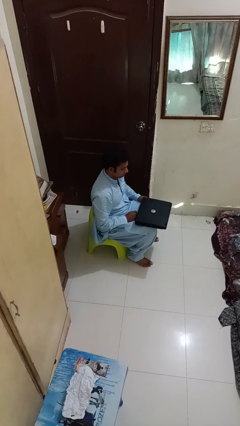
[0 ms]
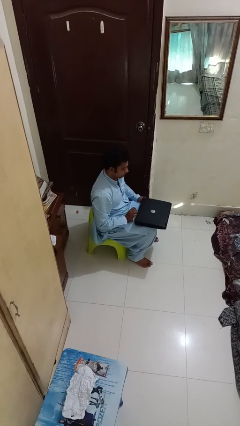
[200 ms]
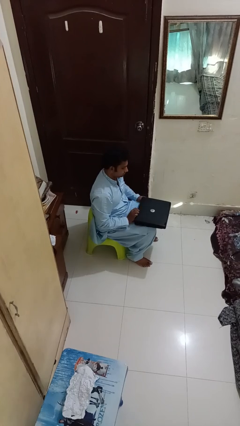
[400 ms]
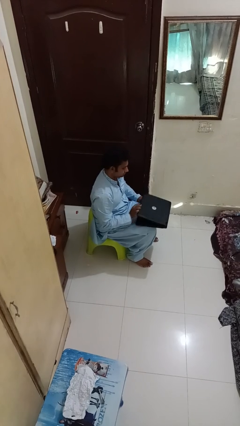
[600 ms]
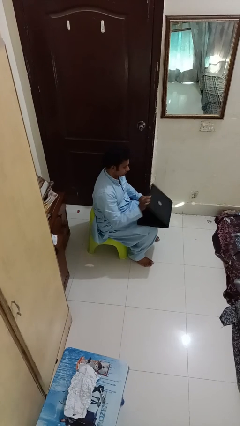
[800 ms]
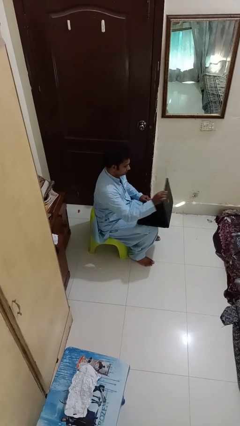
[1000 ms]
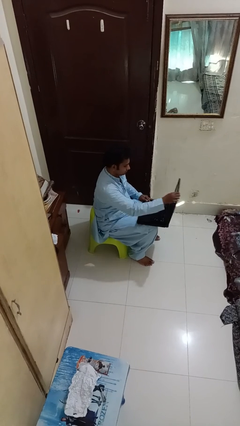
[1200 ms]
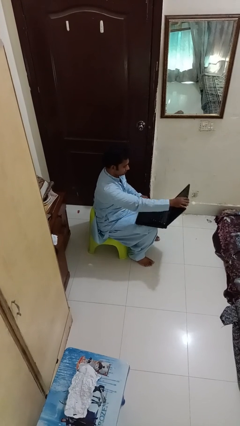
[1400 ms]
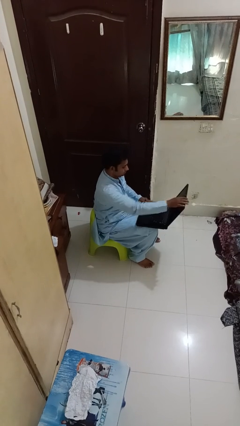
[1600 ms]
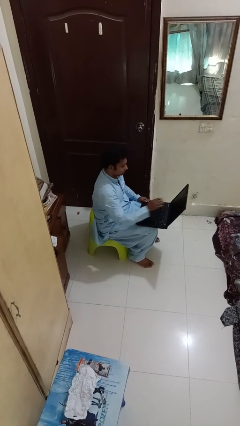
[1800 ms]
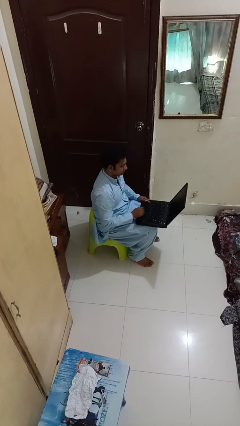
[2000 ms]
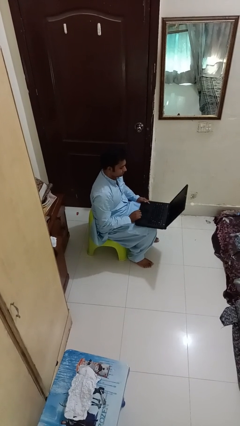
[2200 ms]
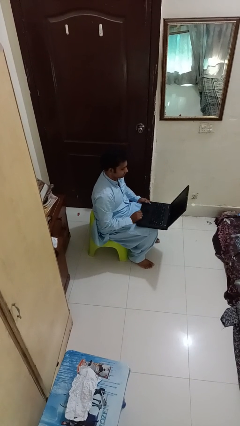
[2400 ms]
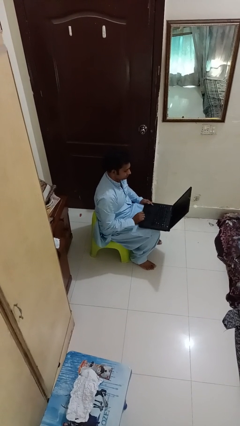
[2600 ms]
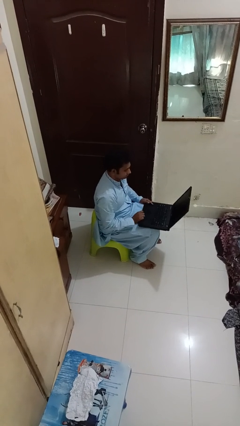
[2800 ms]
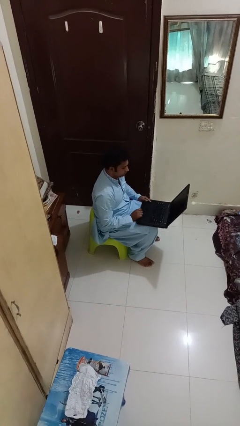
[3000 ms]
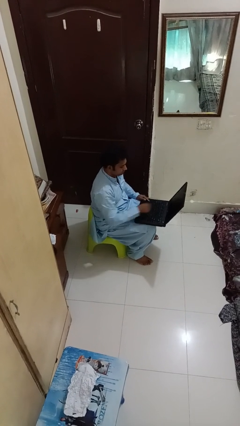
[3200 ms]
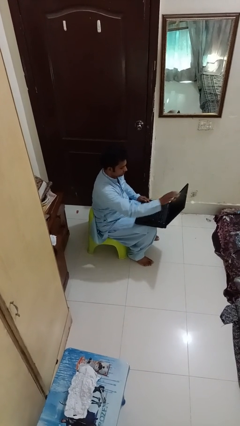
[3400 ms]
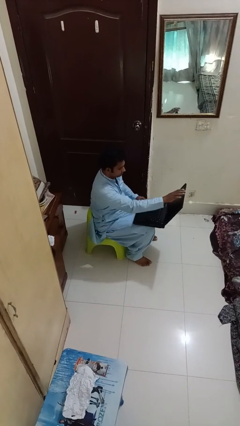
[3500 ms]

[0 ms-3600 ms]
person opens laptop

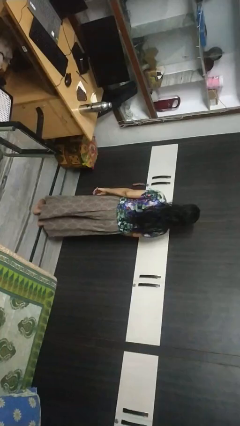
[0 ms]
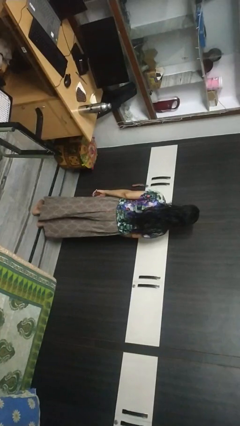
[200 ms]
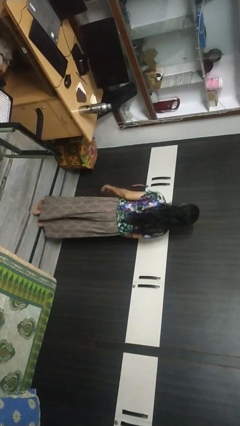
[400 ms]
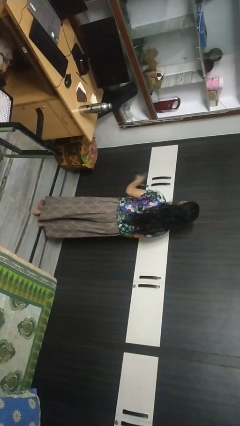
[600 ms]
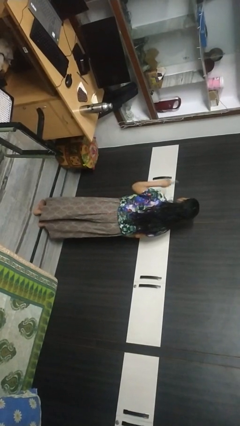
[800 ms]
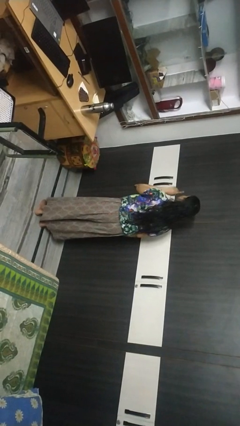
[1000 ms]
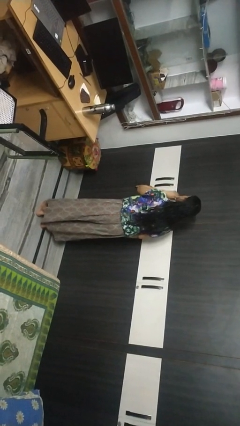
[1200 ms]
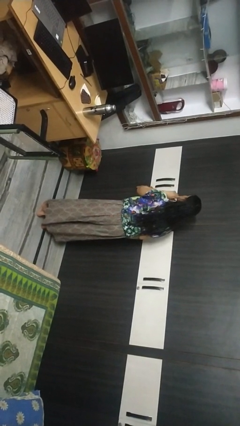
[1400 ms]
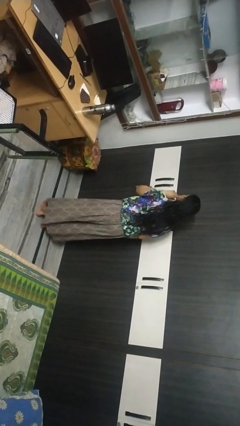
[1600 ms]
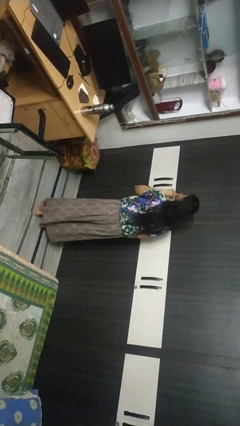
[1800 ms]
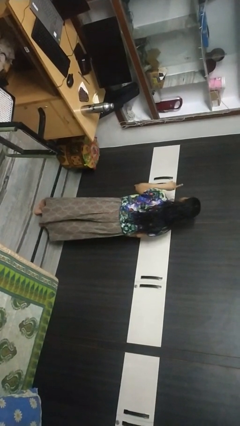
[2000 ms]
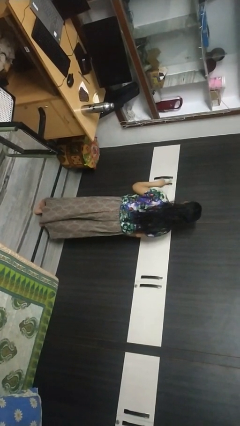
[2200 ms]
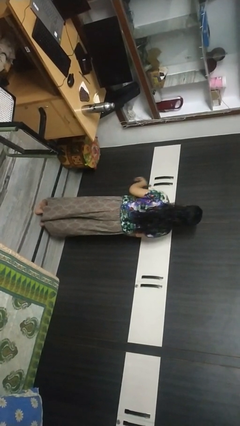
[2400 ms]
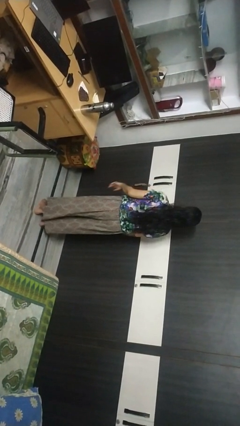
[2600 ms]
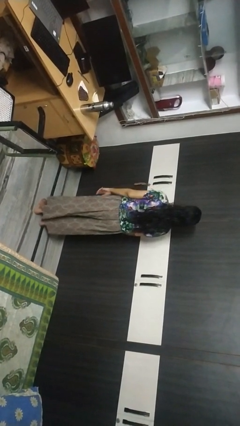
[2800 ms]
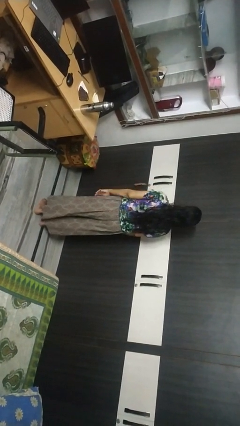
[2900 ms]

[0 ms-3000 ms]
person gestures be quiet

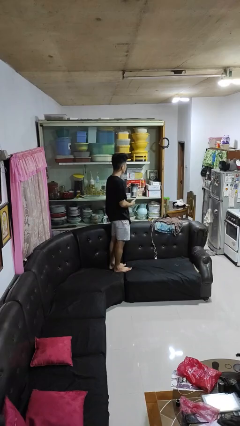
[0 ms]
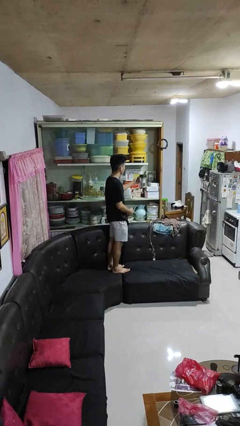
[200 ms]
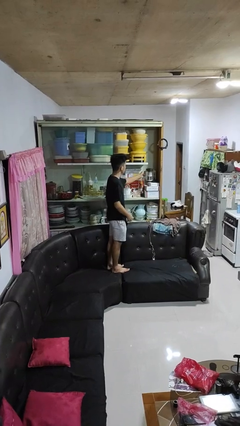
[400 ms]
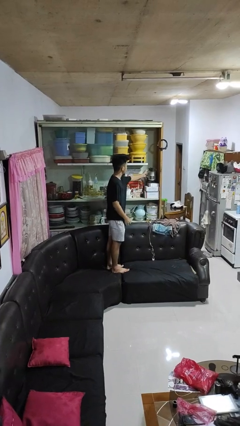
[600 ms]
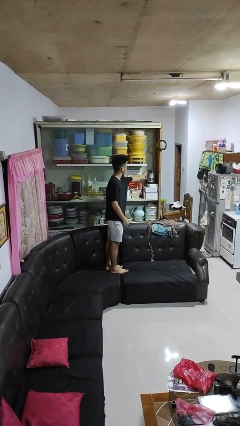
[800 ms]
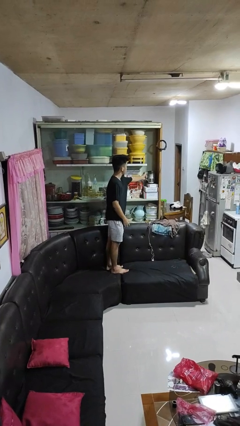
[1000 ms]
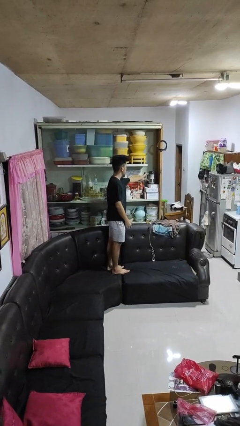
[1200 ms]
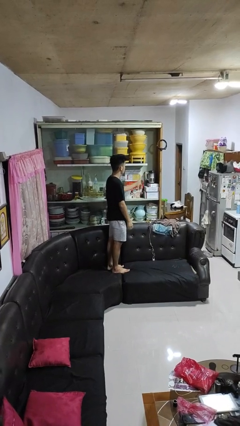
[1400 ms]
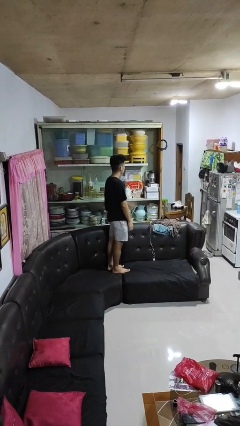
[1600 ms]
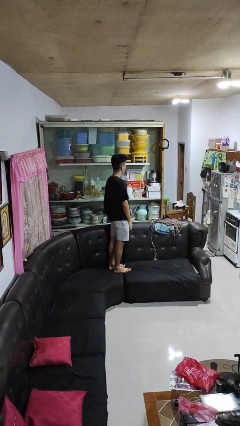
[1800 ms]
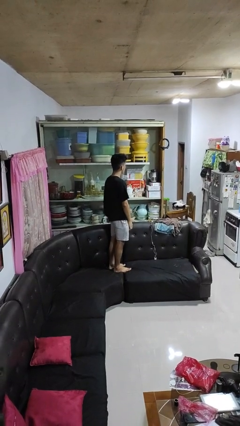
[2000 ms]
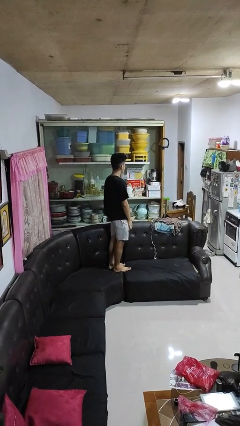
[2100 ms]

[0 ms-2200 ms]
person puts down object into cabinet

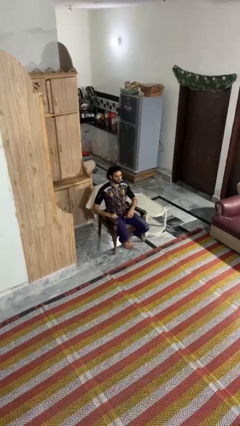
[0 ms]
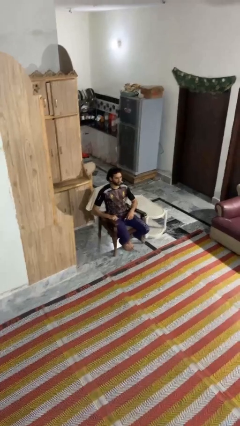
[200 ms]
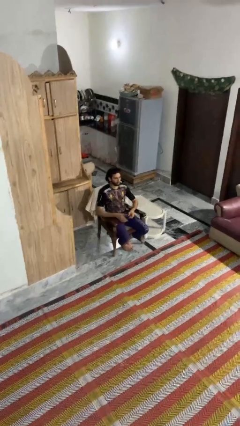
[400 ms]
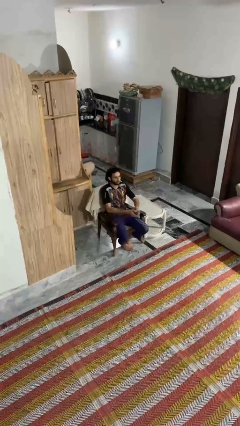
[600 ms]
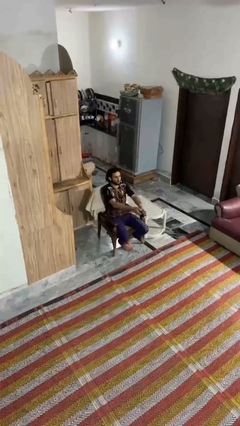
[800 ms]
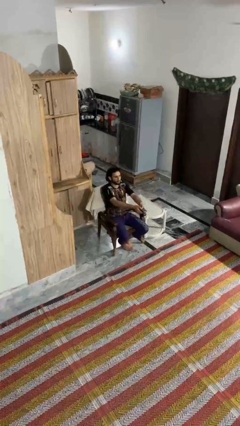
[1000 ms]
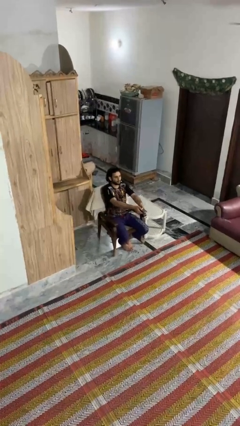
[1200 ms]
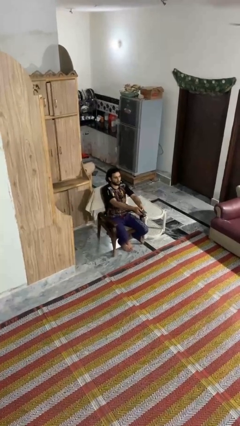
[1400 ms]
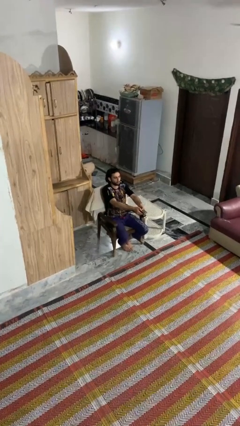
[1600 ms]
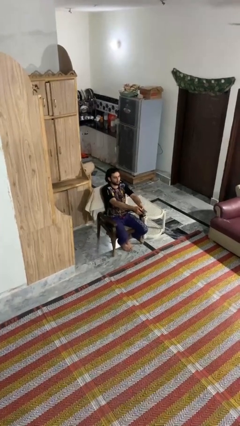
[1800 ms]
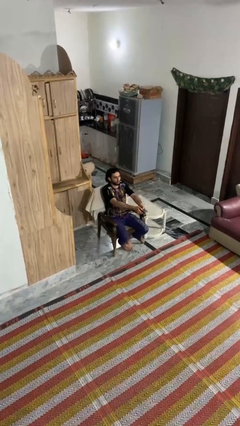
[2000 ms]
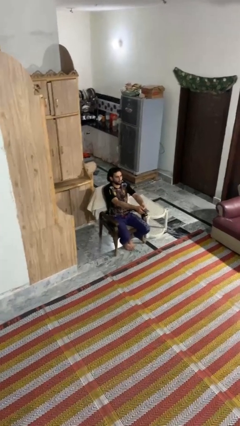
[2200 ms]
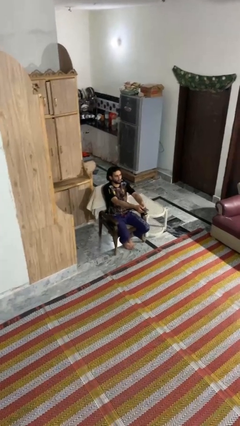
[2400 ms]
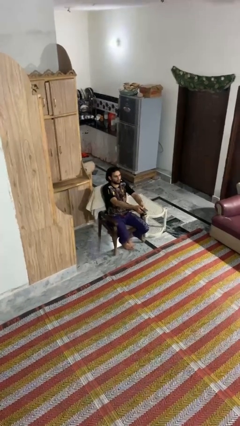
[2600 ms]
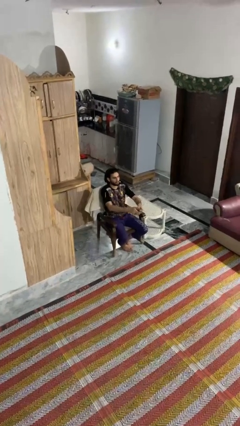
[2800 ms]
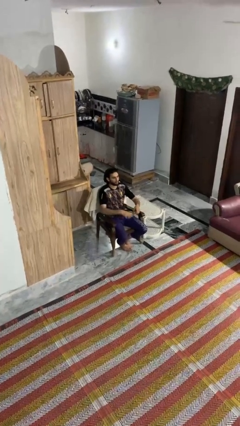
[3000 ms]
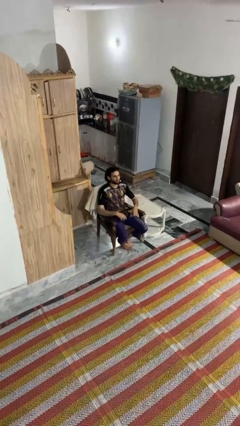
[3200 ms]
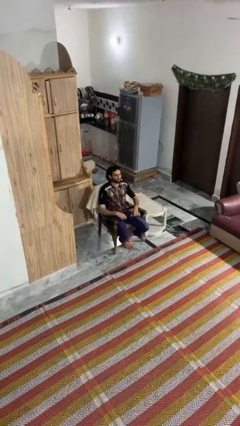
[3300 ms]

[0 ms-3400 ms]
person uses television remote

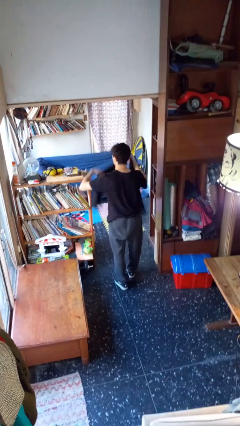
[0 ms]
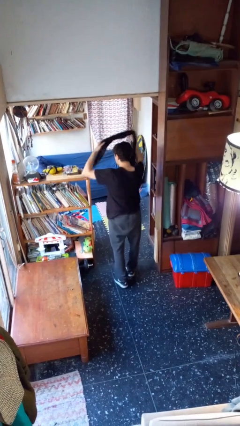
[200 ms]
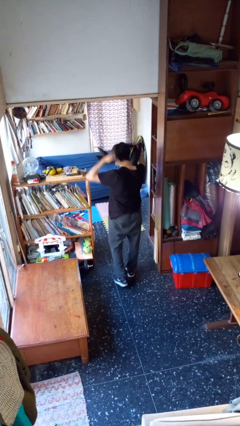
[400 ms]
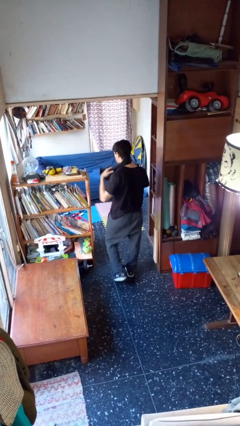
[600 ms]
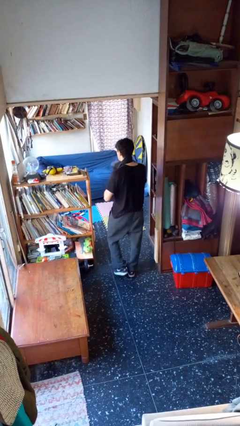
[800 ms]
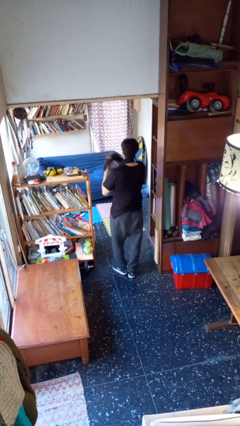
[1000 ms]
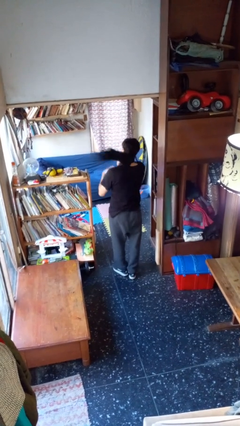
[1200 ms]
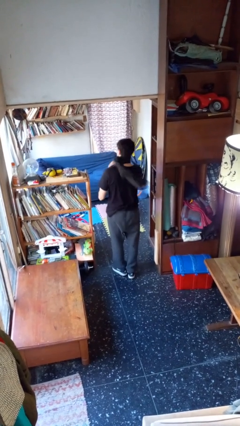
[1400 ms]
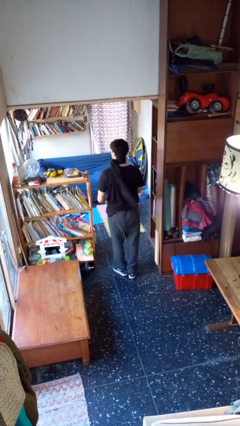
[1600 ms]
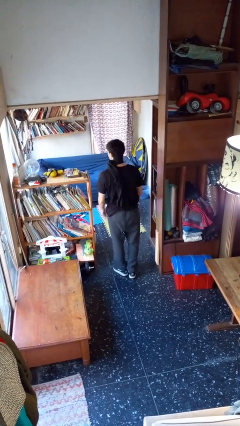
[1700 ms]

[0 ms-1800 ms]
person puts on scarf

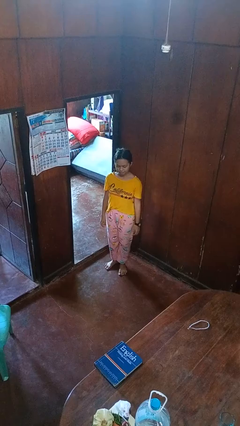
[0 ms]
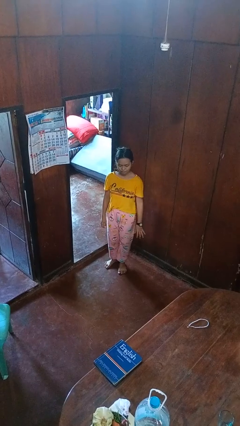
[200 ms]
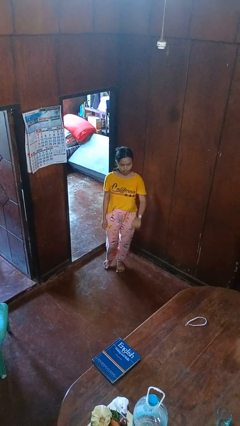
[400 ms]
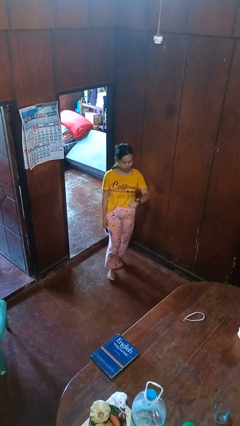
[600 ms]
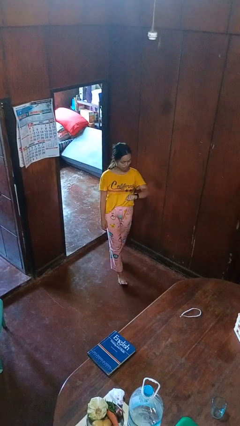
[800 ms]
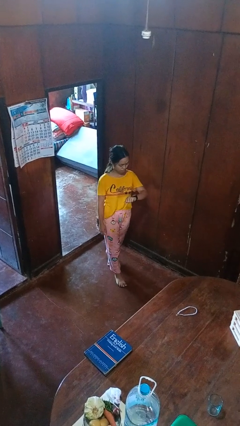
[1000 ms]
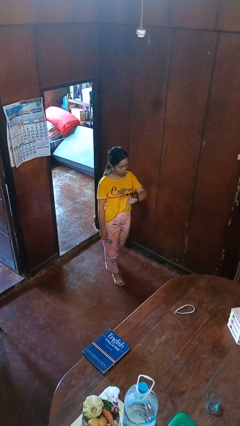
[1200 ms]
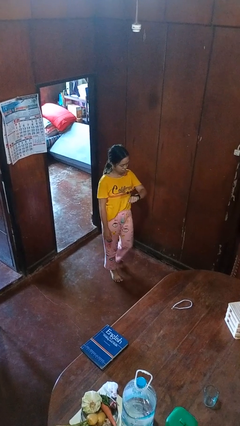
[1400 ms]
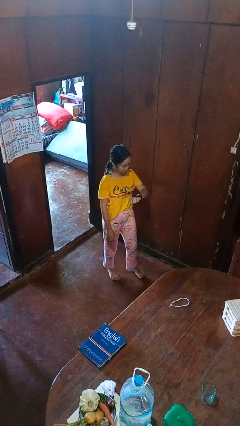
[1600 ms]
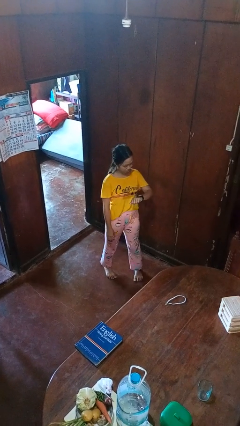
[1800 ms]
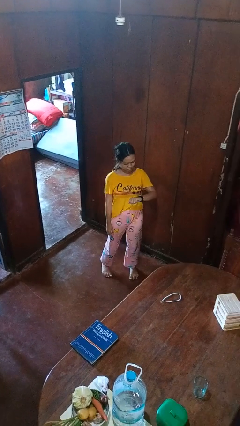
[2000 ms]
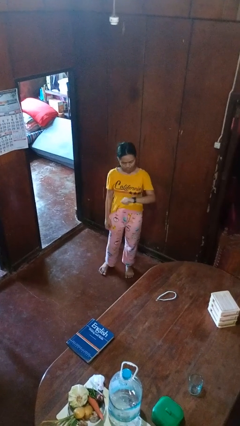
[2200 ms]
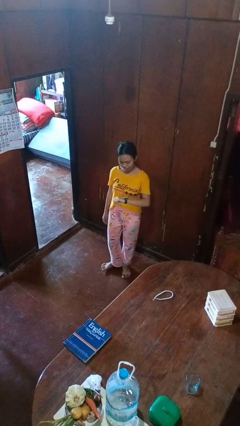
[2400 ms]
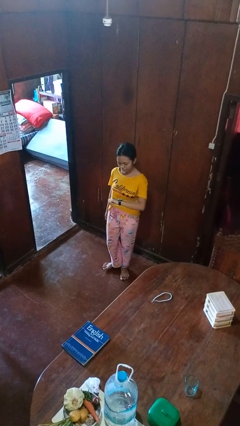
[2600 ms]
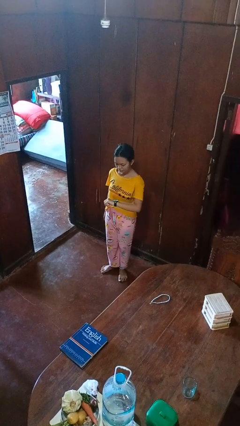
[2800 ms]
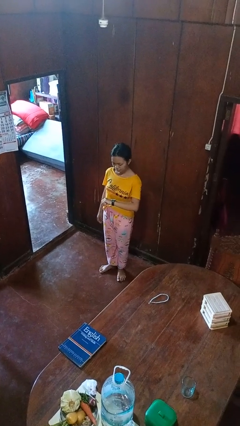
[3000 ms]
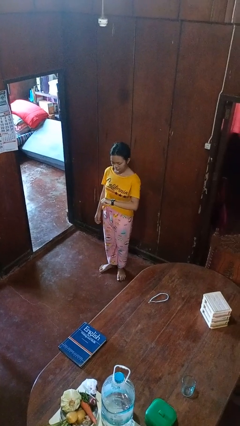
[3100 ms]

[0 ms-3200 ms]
person looks at wristwatch
